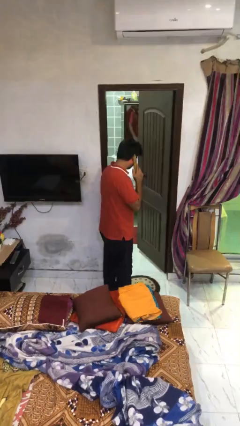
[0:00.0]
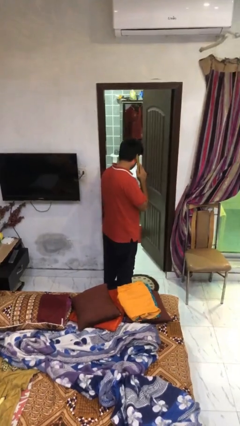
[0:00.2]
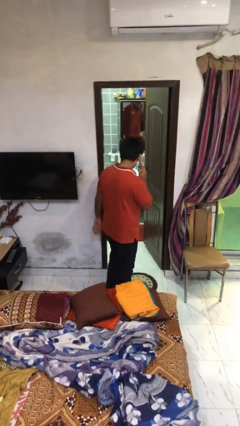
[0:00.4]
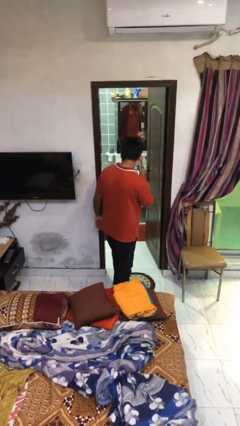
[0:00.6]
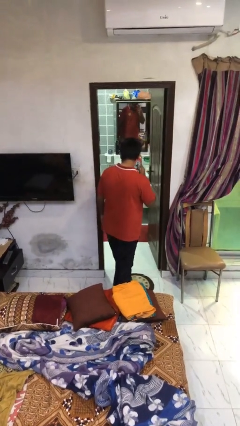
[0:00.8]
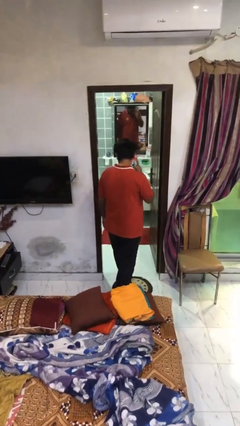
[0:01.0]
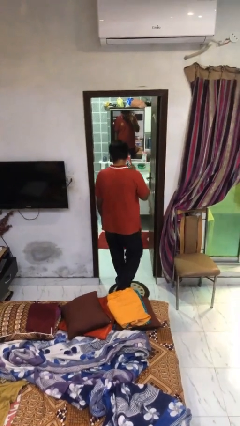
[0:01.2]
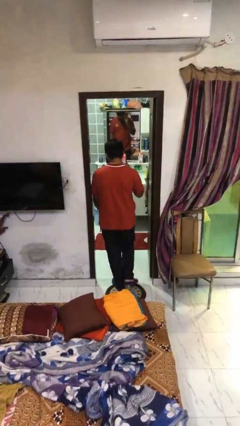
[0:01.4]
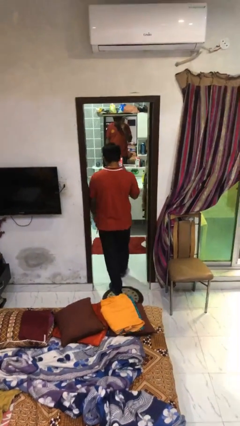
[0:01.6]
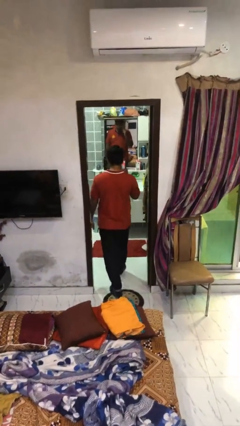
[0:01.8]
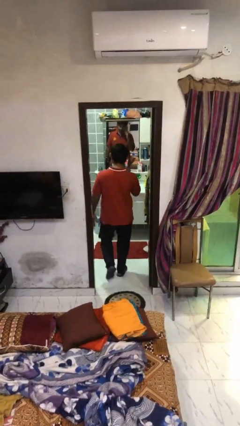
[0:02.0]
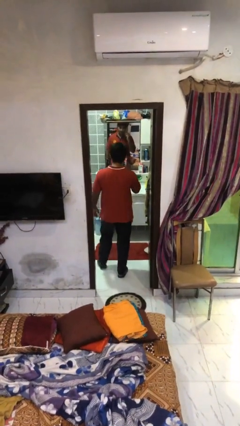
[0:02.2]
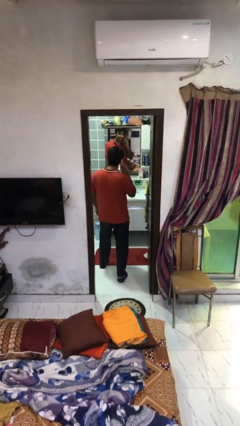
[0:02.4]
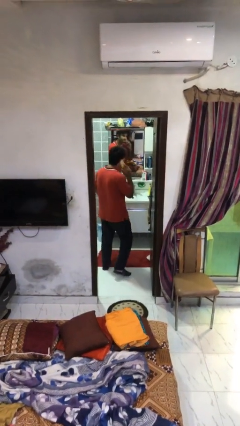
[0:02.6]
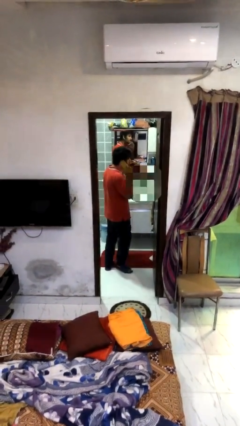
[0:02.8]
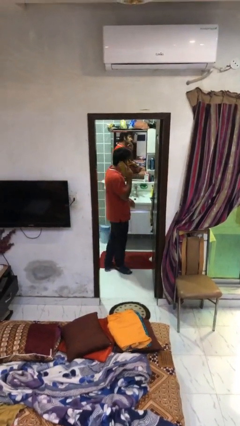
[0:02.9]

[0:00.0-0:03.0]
person exits scene through structure

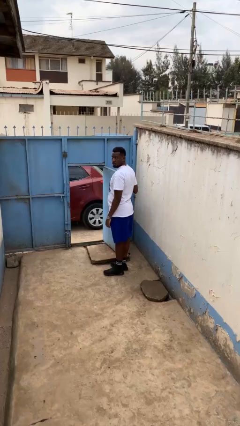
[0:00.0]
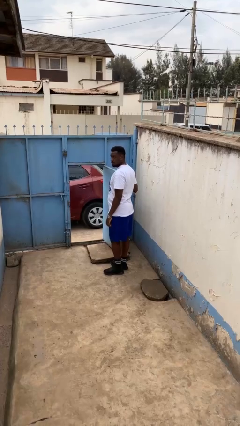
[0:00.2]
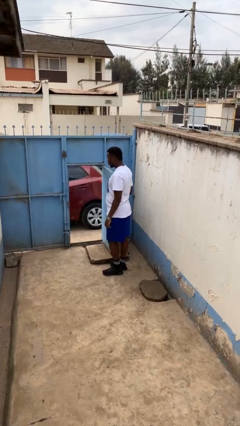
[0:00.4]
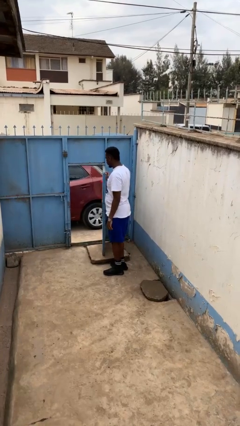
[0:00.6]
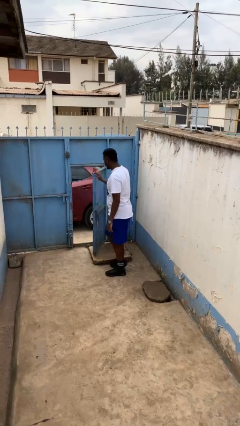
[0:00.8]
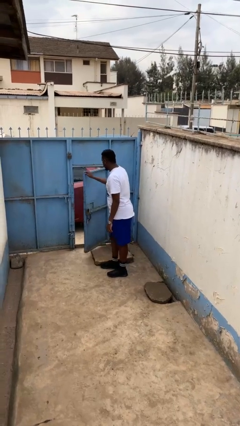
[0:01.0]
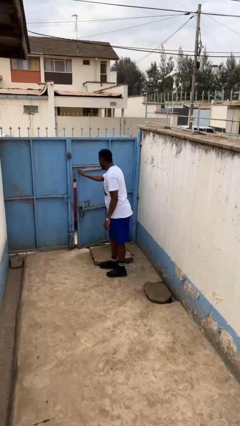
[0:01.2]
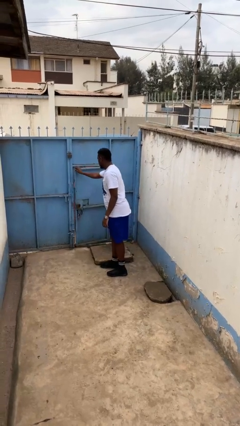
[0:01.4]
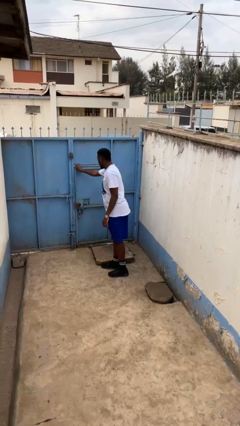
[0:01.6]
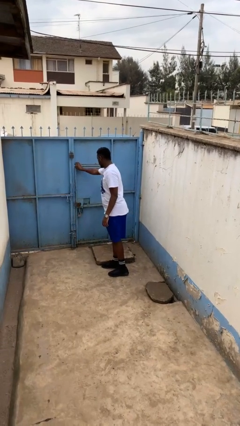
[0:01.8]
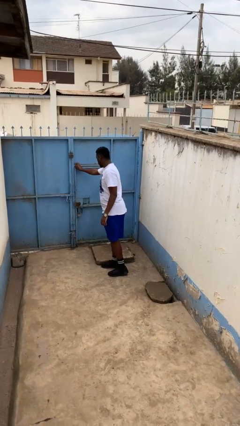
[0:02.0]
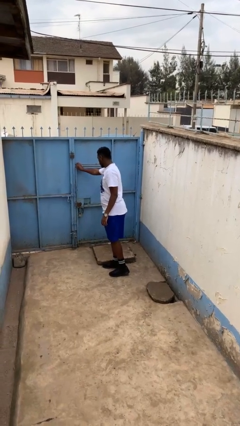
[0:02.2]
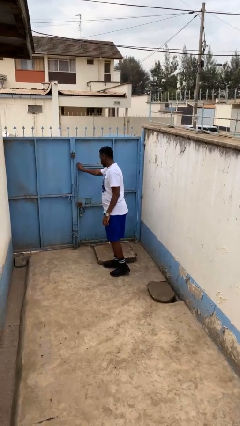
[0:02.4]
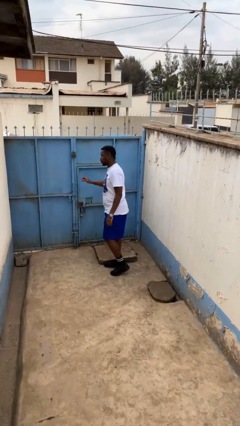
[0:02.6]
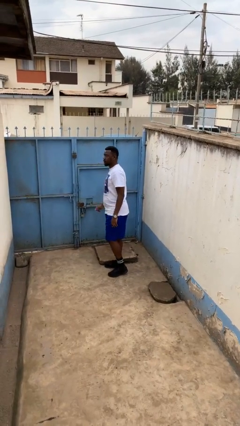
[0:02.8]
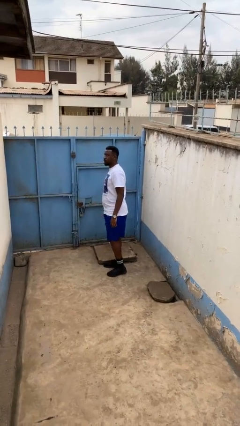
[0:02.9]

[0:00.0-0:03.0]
person closes gate

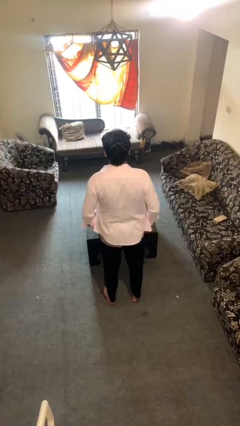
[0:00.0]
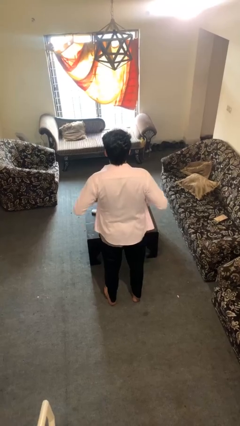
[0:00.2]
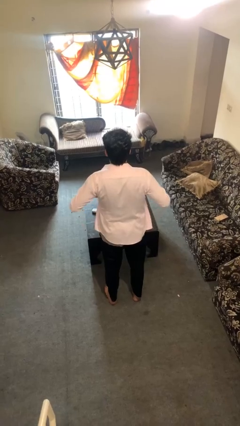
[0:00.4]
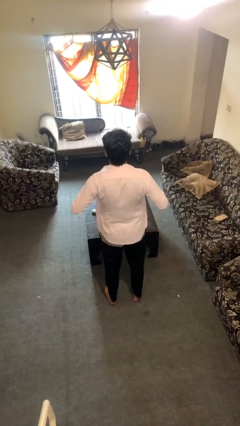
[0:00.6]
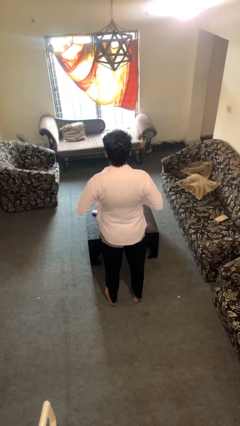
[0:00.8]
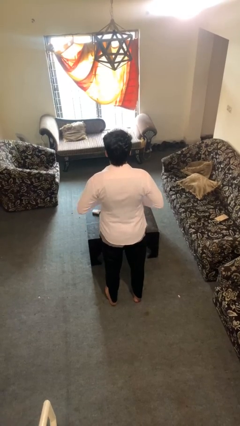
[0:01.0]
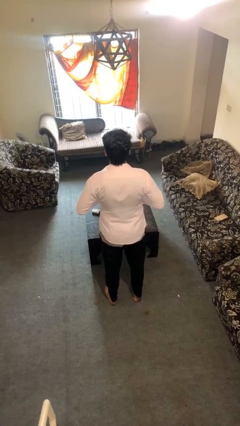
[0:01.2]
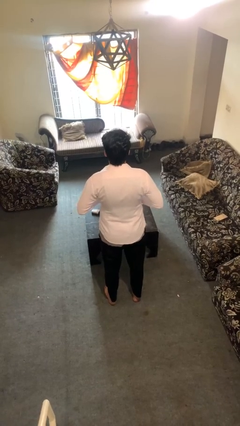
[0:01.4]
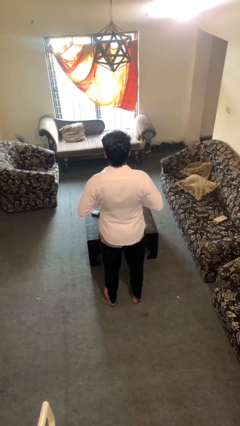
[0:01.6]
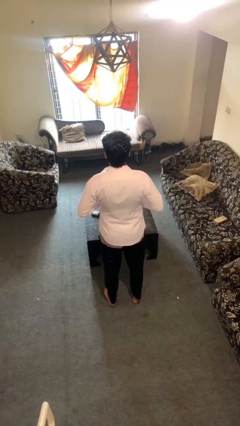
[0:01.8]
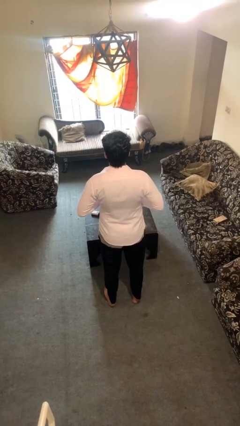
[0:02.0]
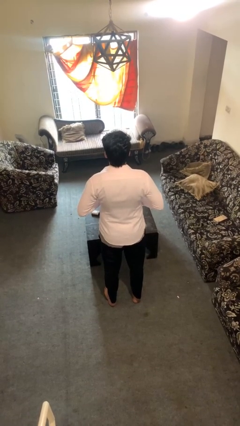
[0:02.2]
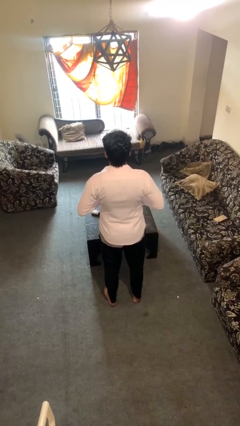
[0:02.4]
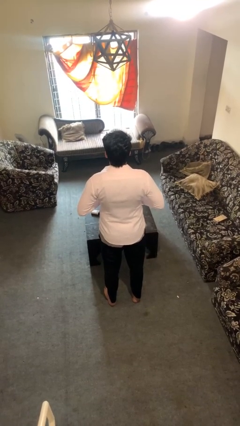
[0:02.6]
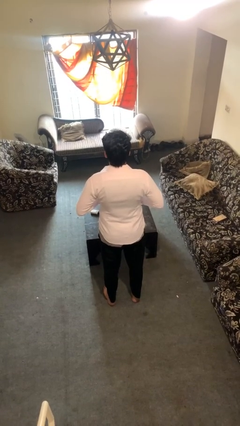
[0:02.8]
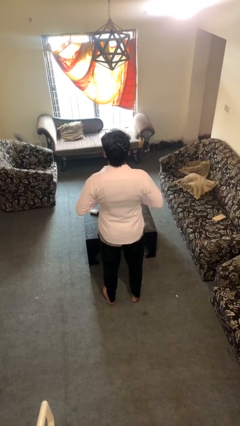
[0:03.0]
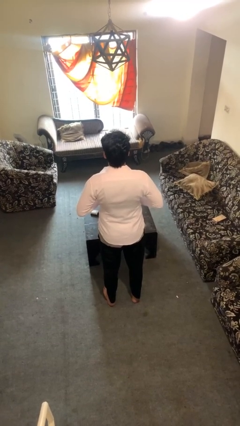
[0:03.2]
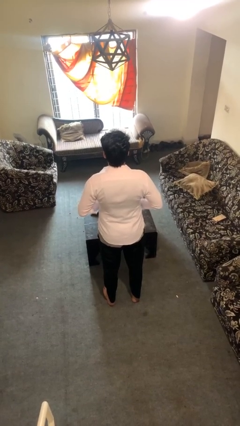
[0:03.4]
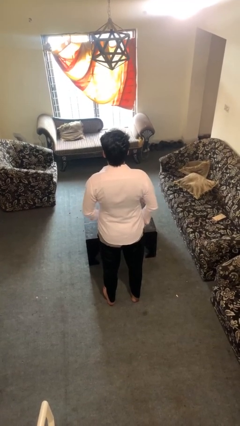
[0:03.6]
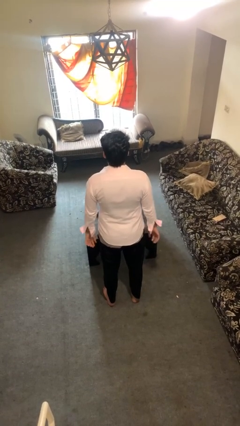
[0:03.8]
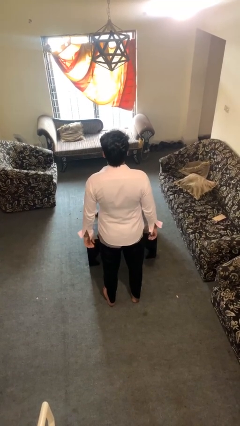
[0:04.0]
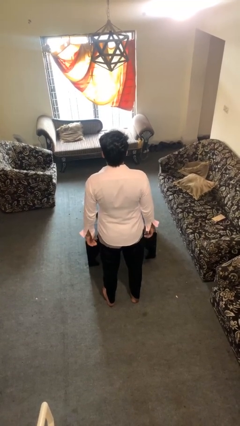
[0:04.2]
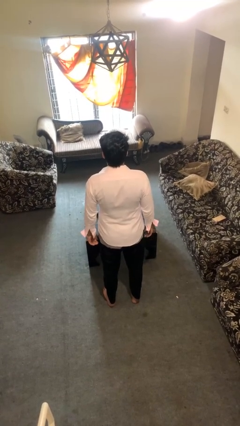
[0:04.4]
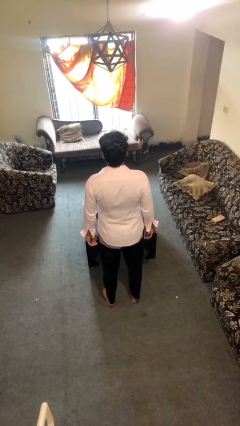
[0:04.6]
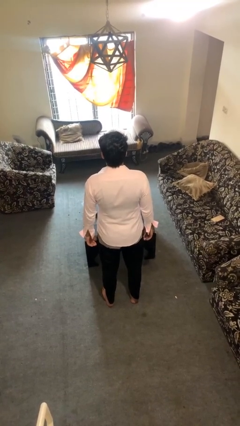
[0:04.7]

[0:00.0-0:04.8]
person buttons shirt

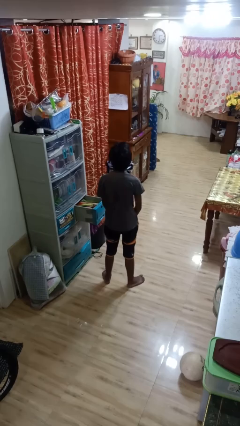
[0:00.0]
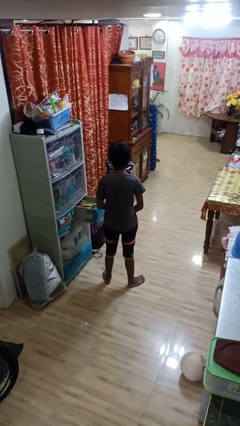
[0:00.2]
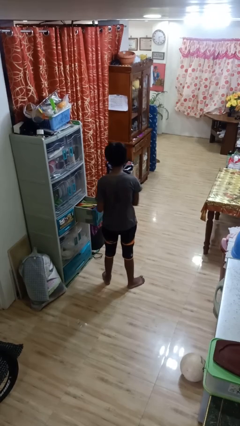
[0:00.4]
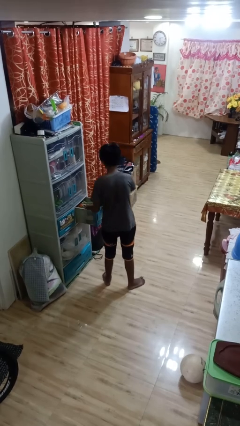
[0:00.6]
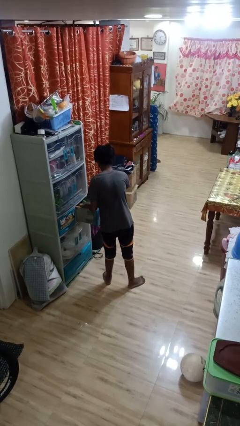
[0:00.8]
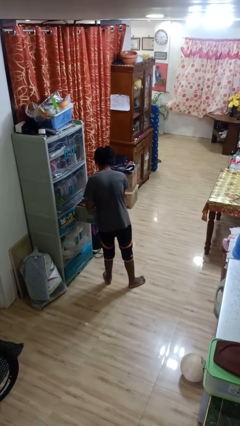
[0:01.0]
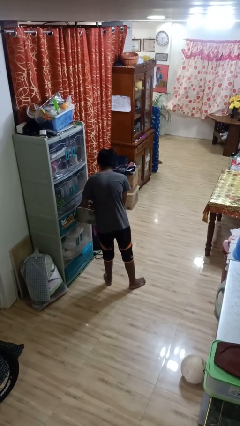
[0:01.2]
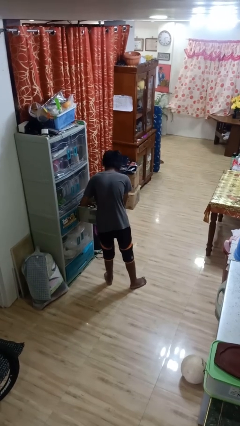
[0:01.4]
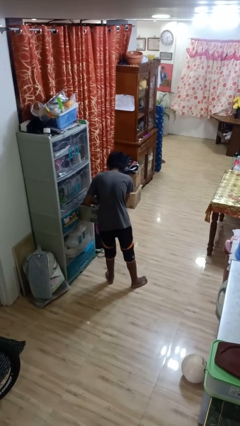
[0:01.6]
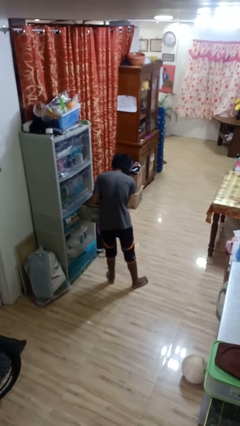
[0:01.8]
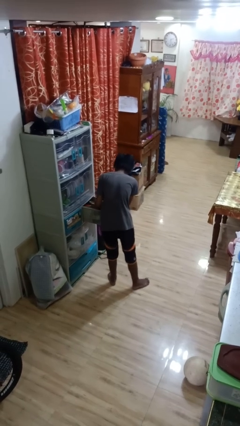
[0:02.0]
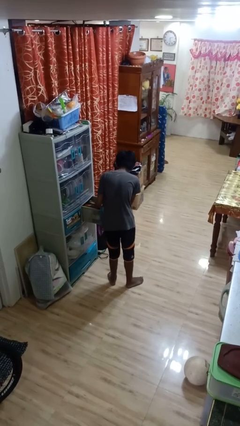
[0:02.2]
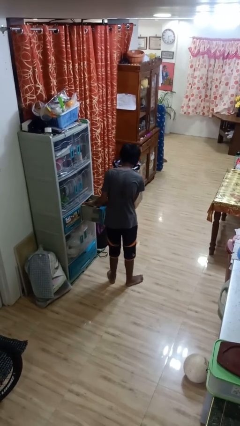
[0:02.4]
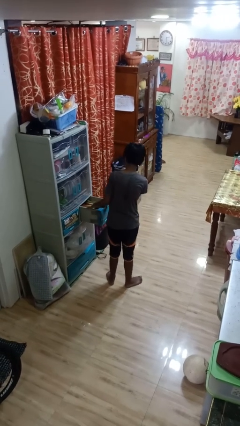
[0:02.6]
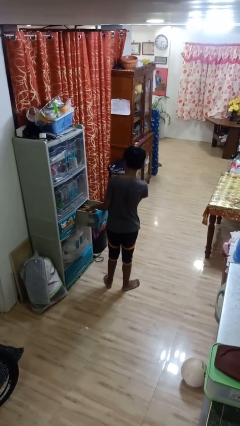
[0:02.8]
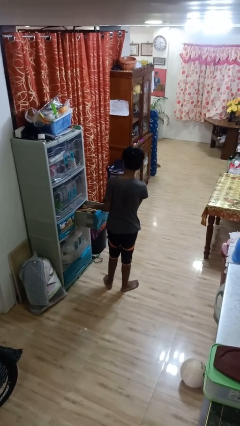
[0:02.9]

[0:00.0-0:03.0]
person searches in kitchen drawer

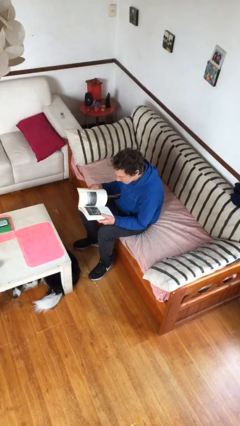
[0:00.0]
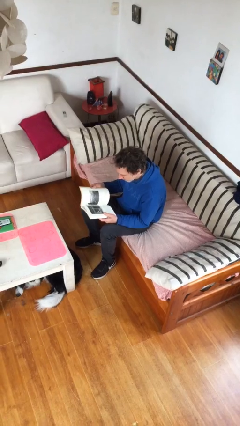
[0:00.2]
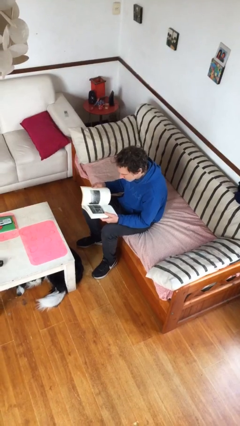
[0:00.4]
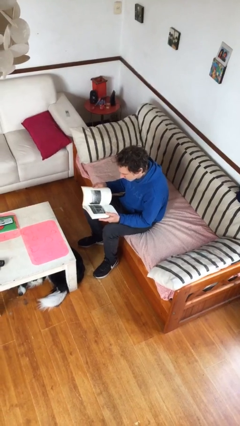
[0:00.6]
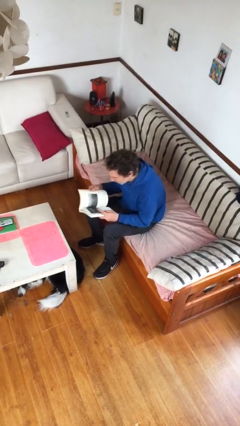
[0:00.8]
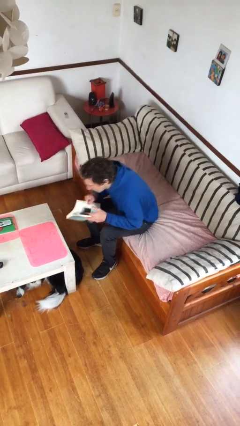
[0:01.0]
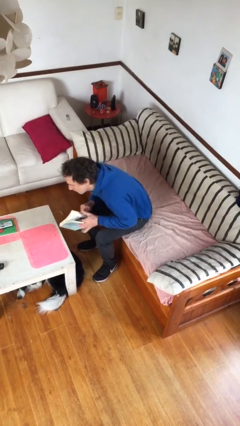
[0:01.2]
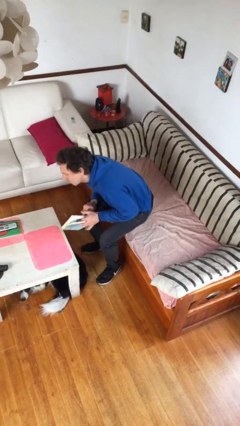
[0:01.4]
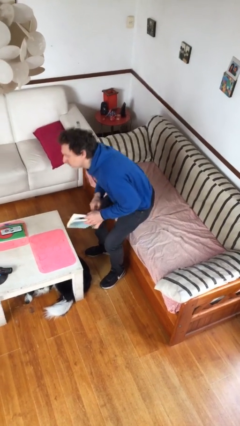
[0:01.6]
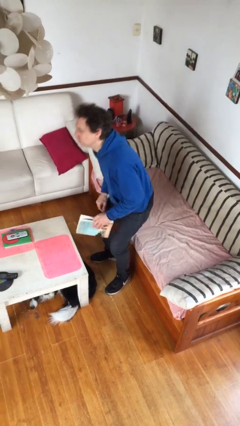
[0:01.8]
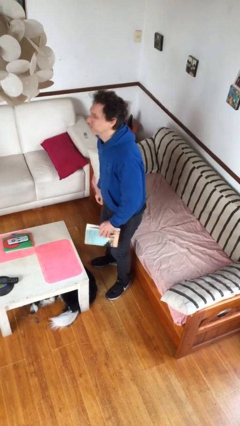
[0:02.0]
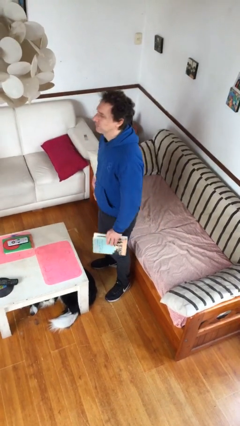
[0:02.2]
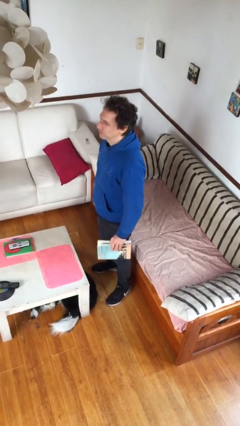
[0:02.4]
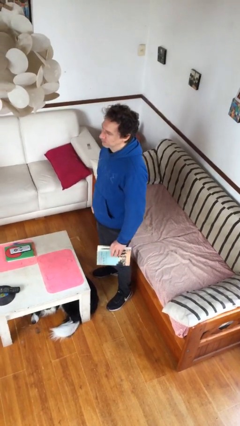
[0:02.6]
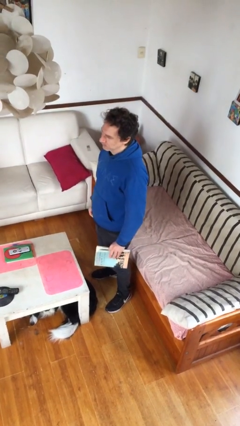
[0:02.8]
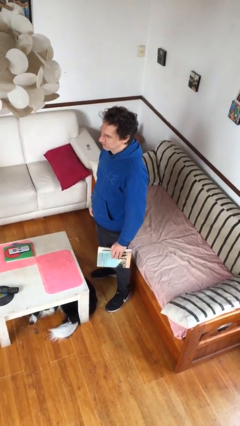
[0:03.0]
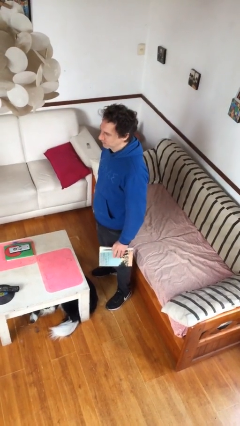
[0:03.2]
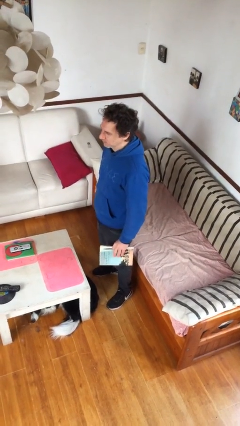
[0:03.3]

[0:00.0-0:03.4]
person stands up

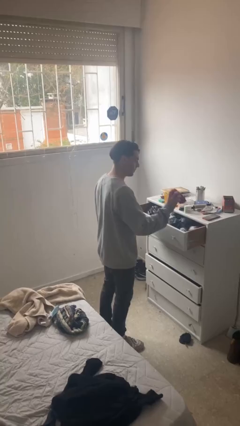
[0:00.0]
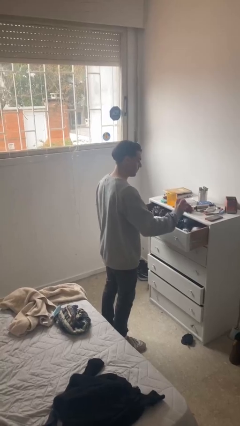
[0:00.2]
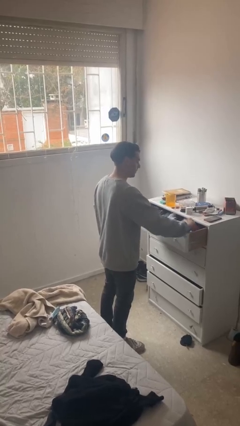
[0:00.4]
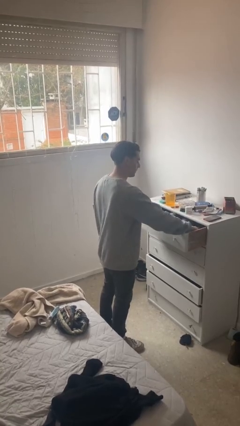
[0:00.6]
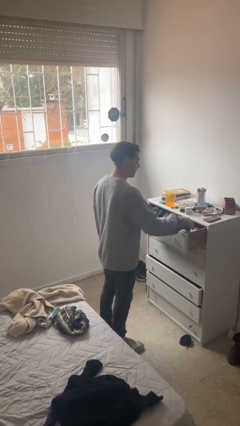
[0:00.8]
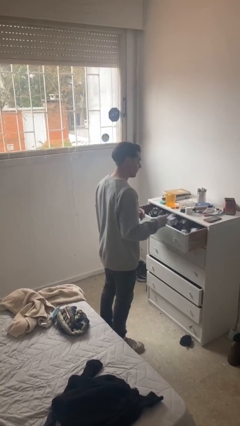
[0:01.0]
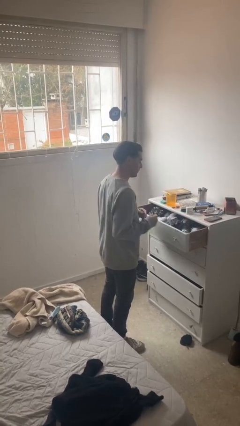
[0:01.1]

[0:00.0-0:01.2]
person puts clothes into dresser
